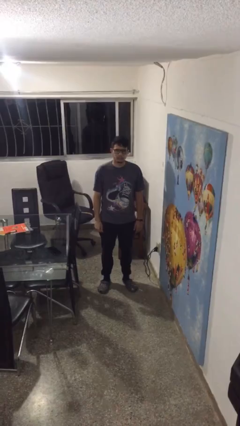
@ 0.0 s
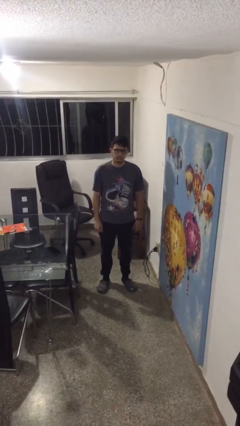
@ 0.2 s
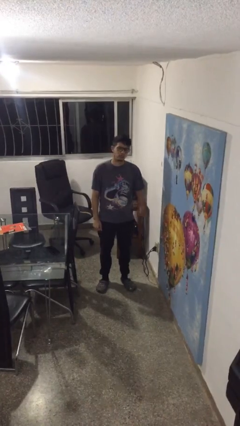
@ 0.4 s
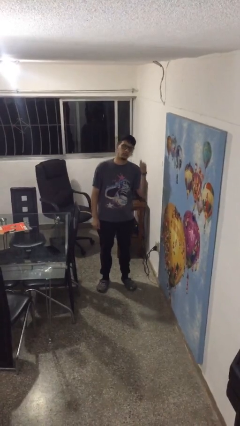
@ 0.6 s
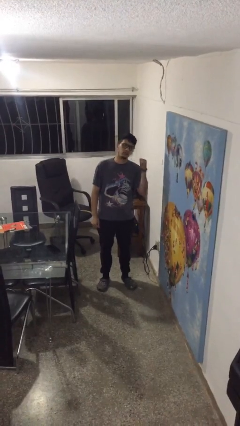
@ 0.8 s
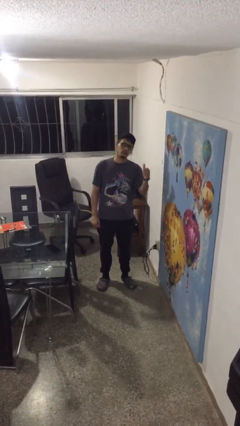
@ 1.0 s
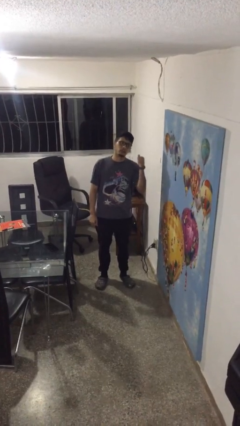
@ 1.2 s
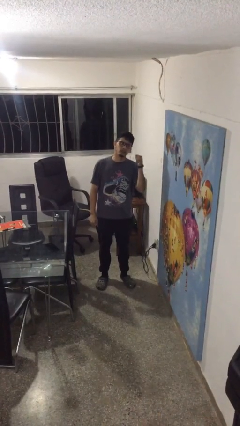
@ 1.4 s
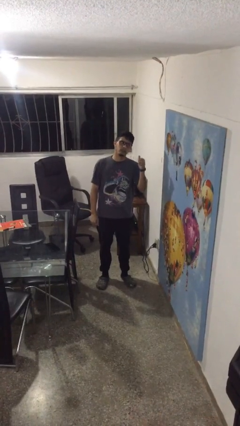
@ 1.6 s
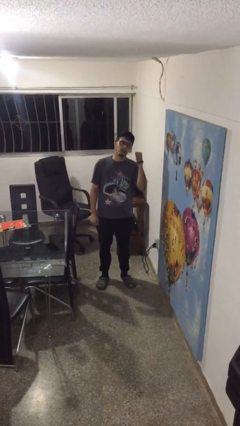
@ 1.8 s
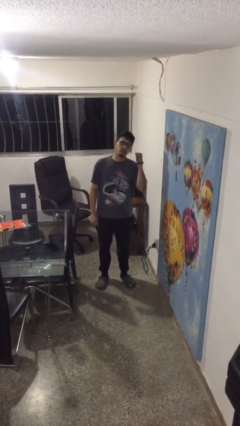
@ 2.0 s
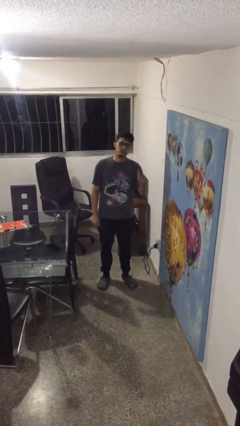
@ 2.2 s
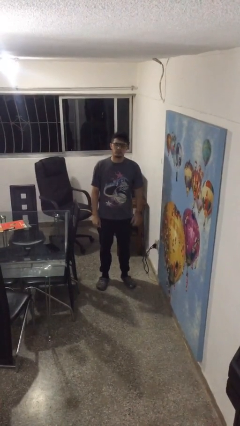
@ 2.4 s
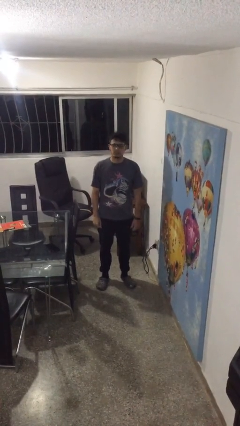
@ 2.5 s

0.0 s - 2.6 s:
person gestures behind me

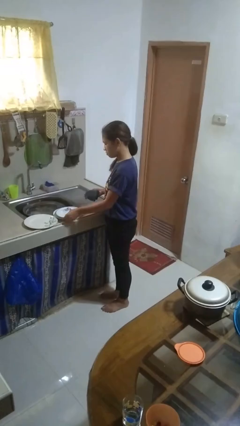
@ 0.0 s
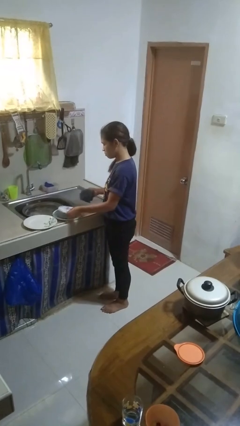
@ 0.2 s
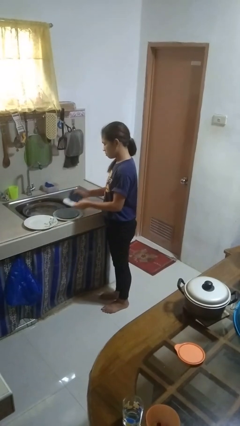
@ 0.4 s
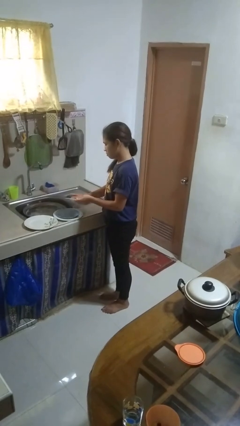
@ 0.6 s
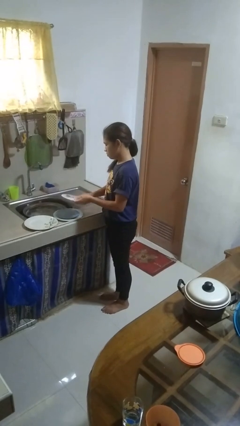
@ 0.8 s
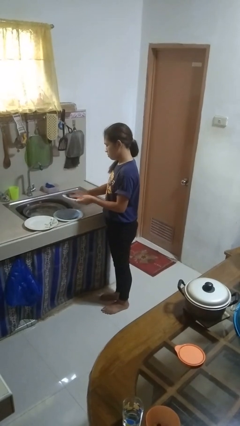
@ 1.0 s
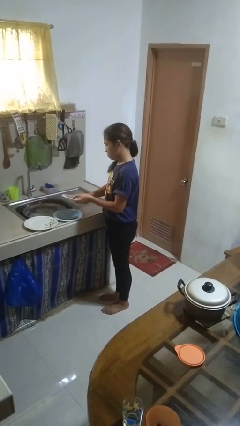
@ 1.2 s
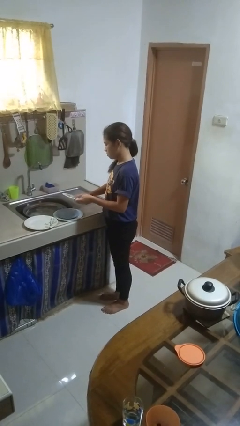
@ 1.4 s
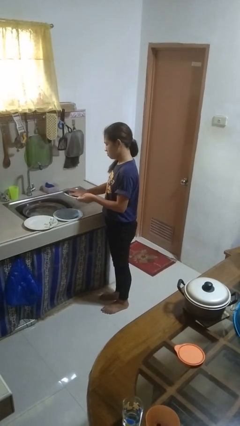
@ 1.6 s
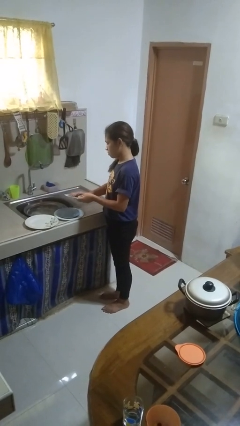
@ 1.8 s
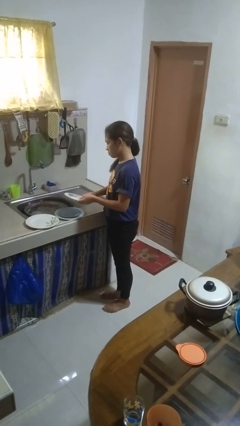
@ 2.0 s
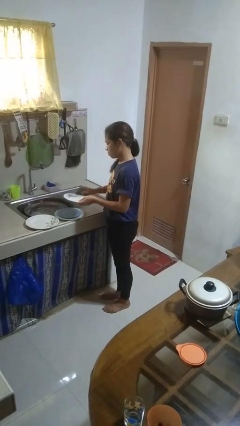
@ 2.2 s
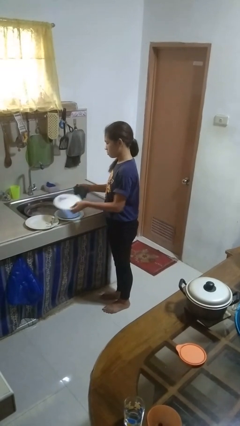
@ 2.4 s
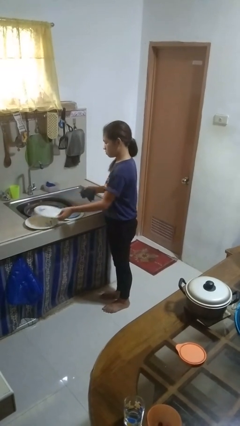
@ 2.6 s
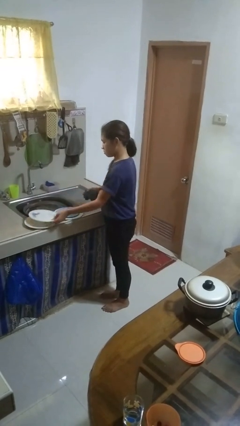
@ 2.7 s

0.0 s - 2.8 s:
person dries dish

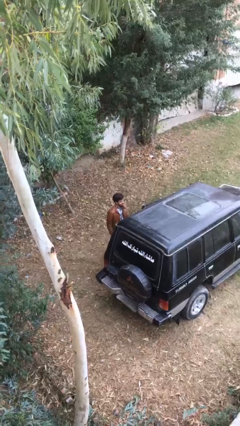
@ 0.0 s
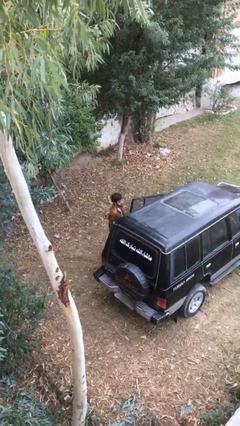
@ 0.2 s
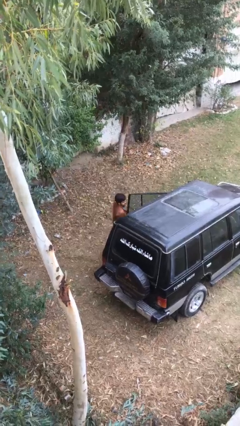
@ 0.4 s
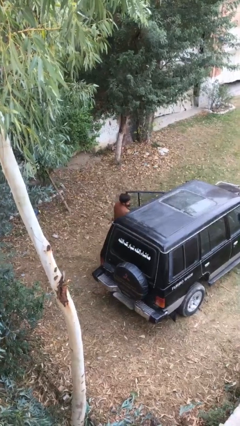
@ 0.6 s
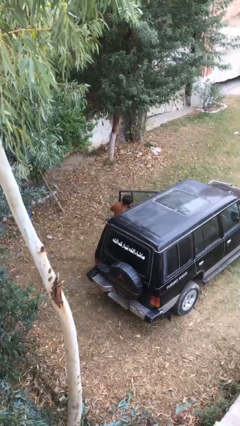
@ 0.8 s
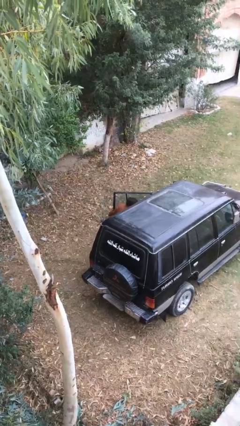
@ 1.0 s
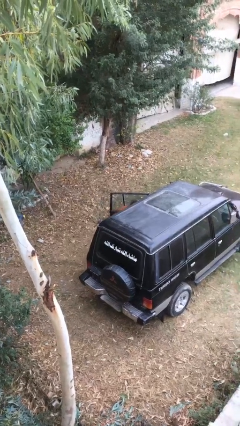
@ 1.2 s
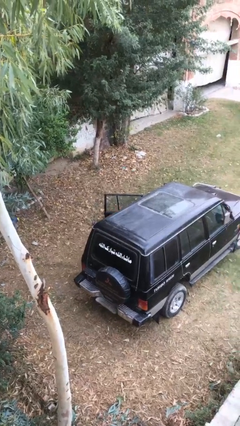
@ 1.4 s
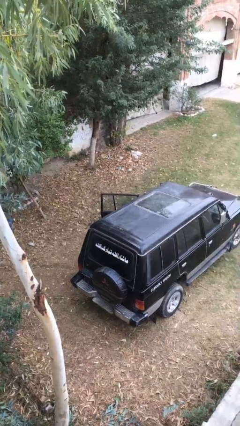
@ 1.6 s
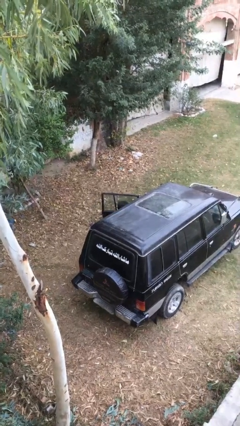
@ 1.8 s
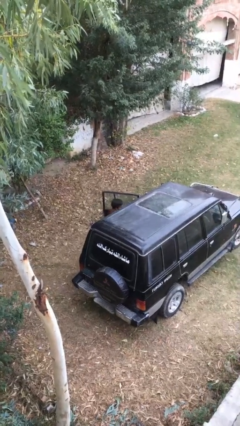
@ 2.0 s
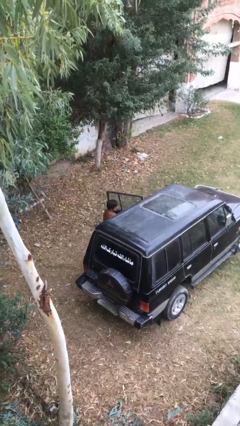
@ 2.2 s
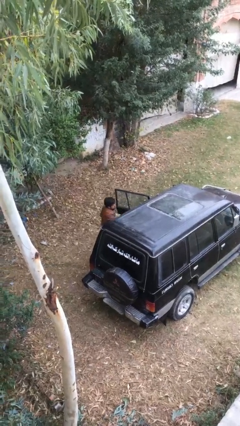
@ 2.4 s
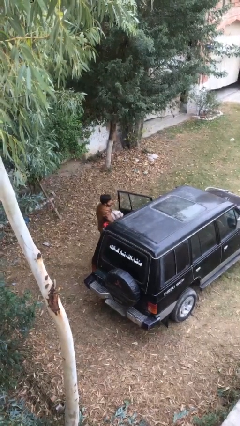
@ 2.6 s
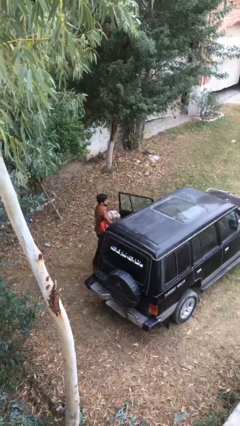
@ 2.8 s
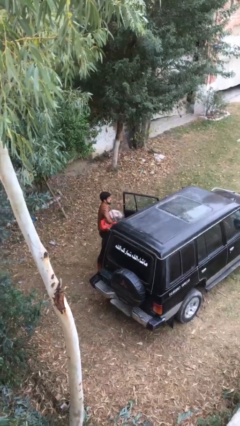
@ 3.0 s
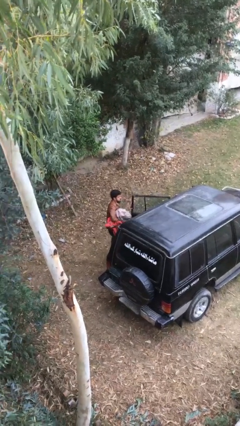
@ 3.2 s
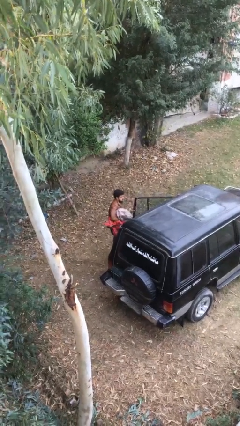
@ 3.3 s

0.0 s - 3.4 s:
person unloads car

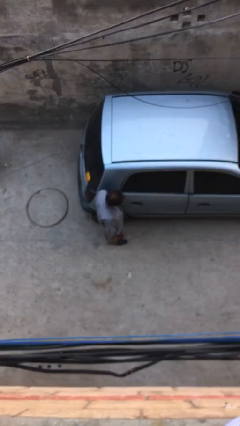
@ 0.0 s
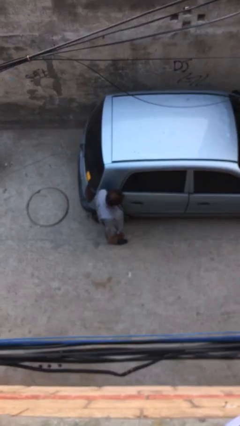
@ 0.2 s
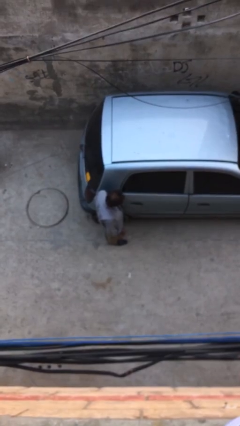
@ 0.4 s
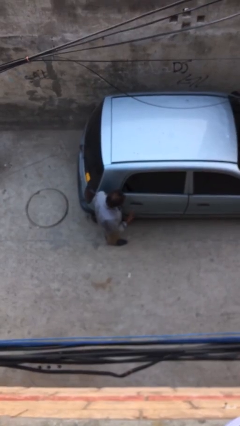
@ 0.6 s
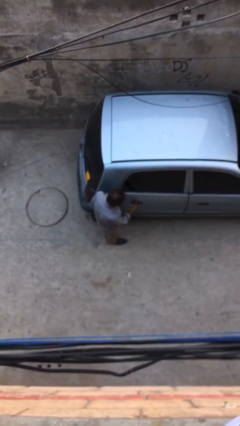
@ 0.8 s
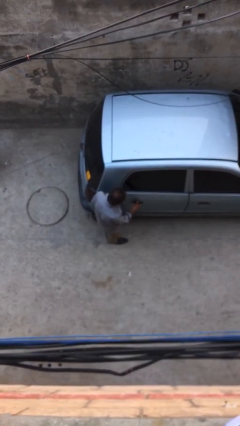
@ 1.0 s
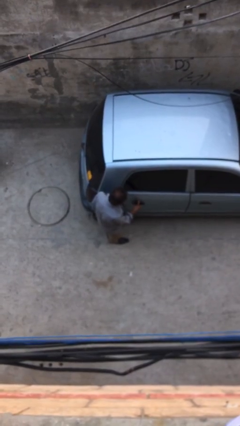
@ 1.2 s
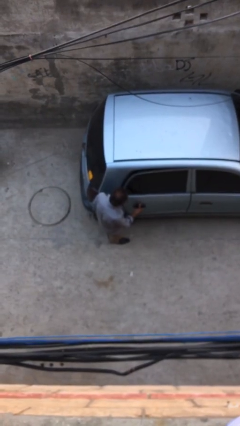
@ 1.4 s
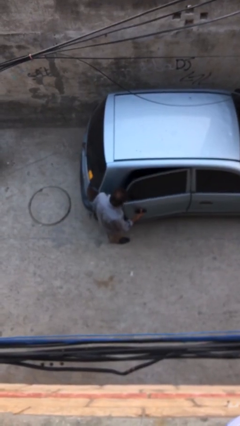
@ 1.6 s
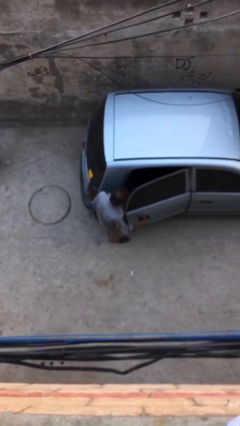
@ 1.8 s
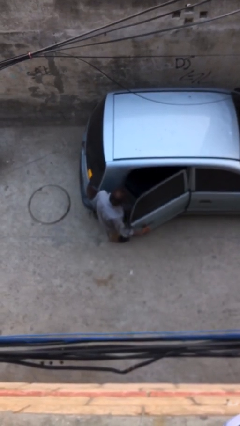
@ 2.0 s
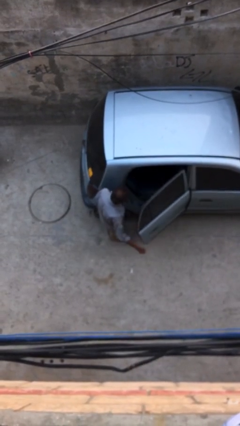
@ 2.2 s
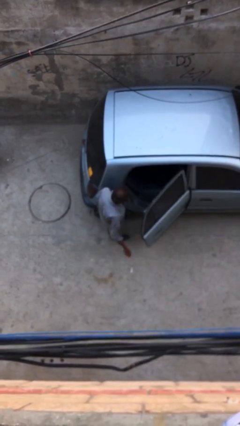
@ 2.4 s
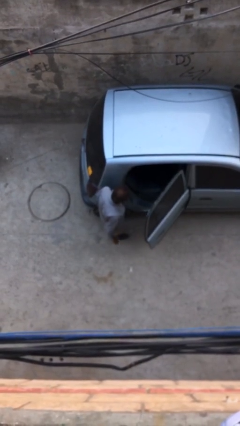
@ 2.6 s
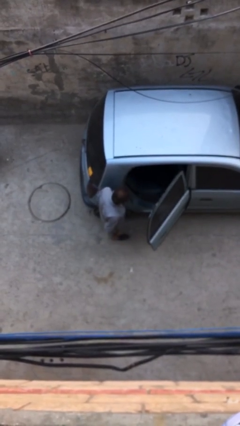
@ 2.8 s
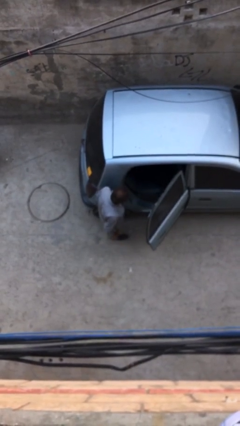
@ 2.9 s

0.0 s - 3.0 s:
person opens car door

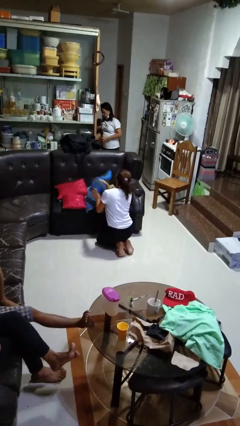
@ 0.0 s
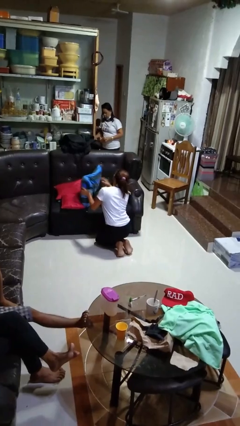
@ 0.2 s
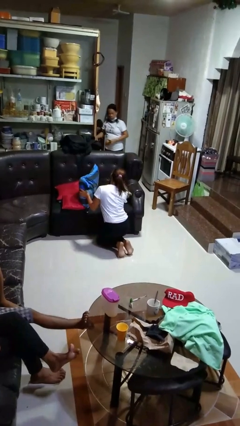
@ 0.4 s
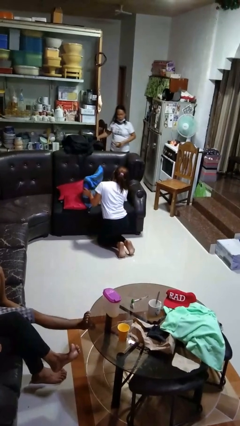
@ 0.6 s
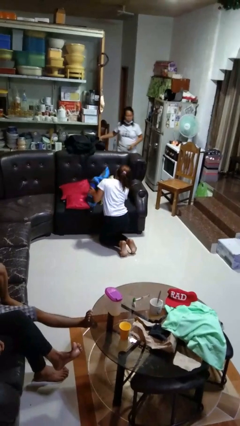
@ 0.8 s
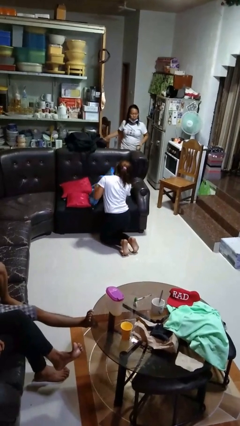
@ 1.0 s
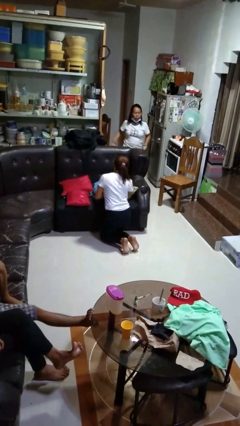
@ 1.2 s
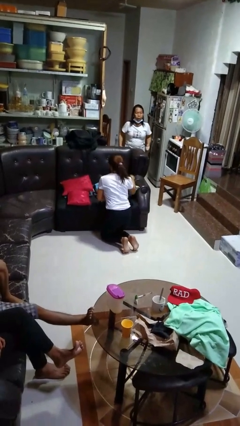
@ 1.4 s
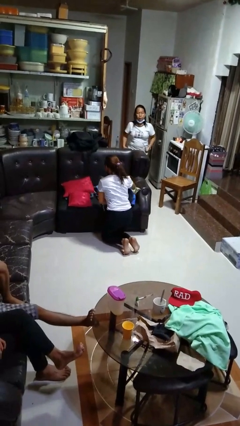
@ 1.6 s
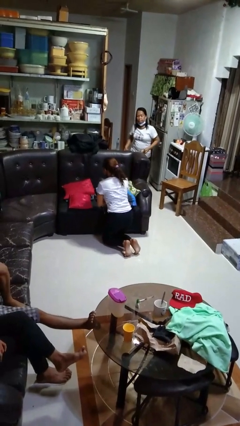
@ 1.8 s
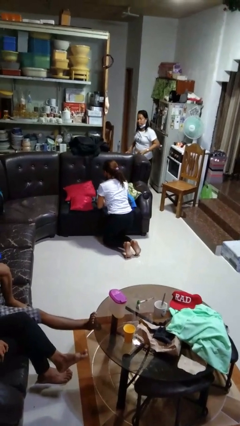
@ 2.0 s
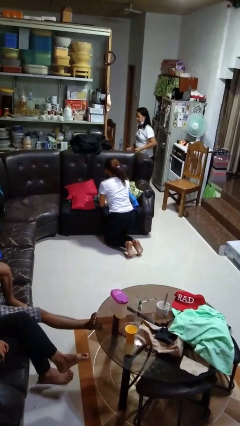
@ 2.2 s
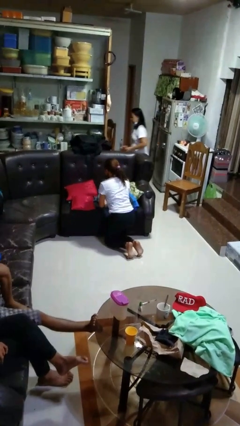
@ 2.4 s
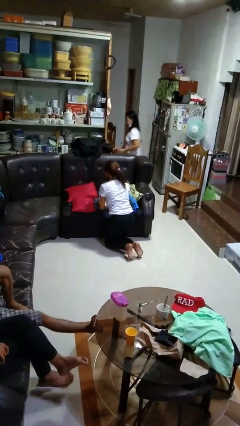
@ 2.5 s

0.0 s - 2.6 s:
person searches in couch

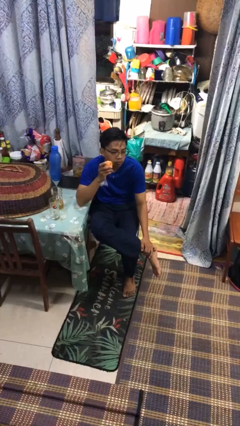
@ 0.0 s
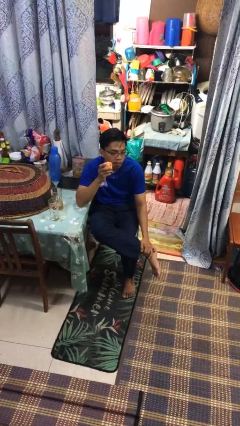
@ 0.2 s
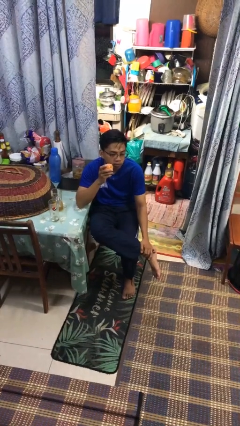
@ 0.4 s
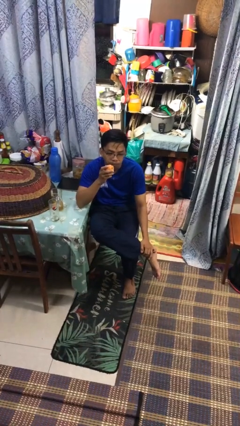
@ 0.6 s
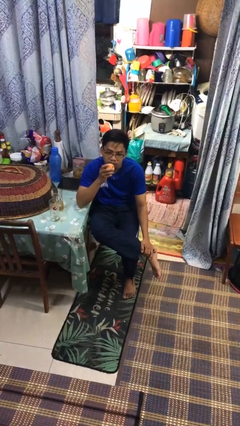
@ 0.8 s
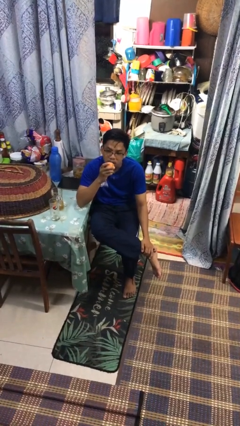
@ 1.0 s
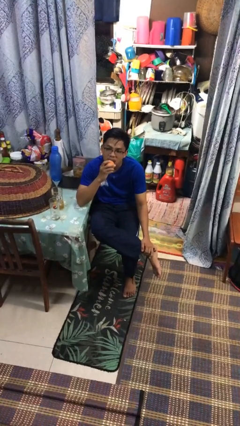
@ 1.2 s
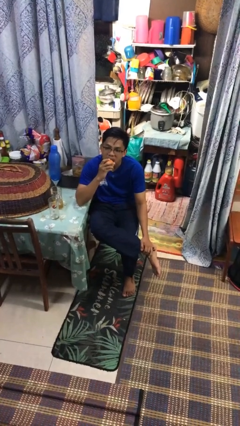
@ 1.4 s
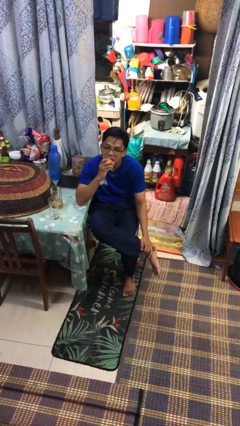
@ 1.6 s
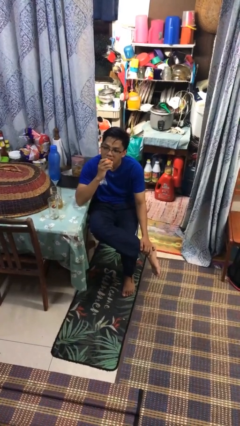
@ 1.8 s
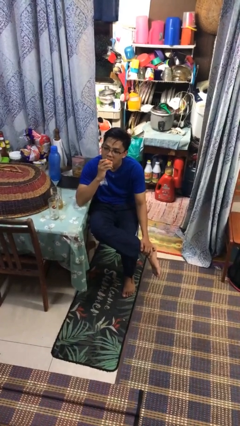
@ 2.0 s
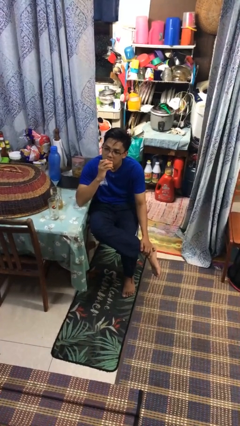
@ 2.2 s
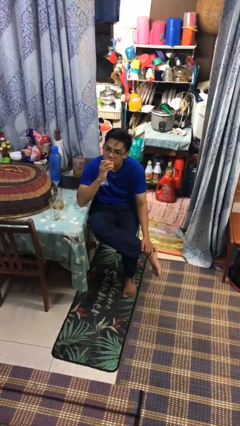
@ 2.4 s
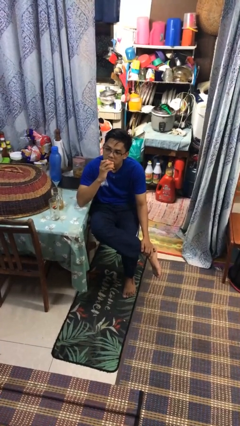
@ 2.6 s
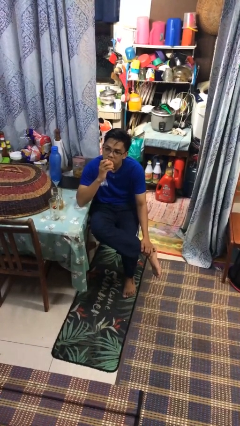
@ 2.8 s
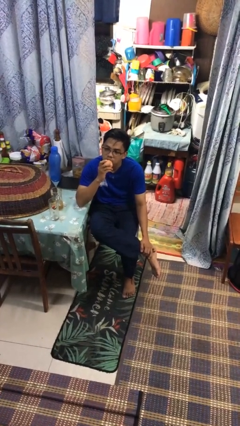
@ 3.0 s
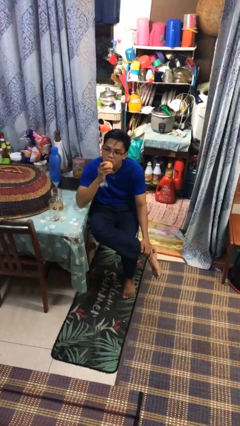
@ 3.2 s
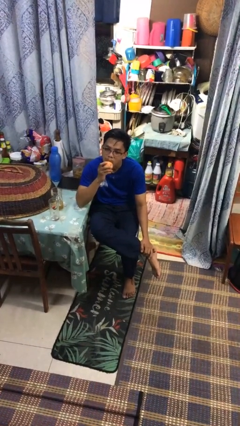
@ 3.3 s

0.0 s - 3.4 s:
person eats apple
